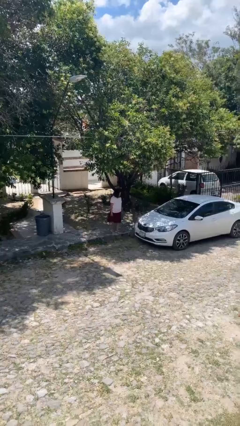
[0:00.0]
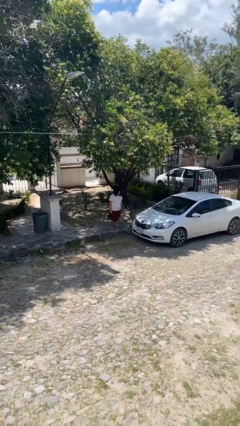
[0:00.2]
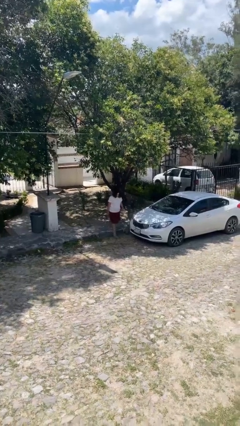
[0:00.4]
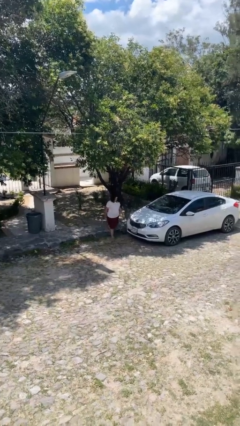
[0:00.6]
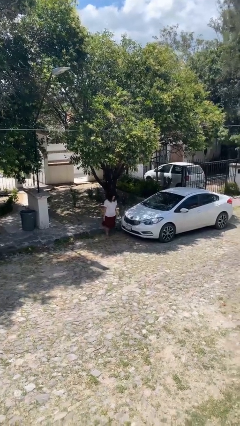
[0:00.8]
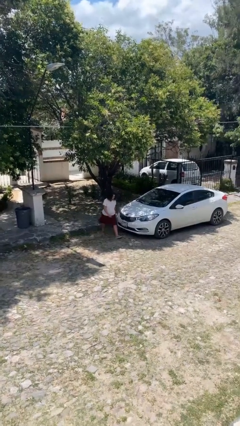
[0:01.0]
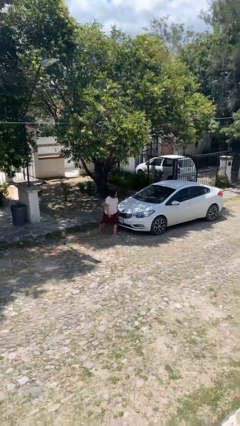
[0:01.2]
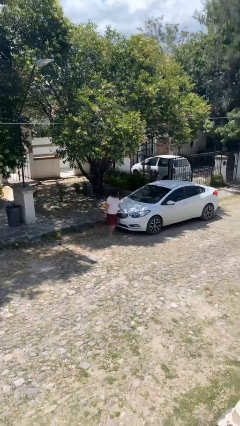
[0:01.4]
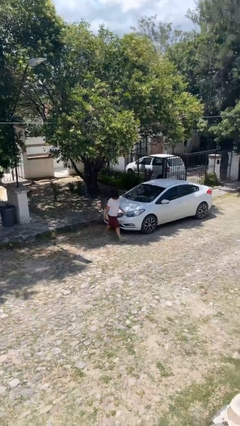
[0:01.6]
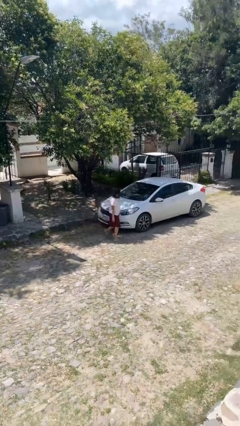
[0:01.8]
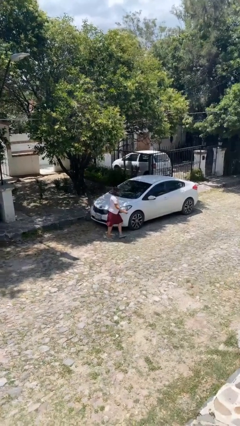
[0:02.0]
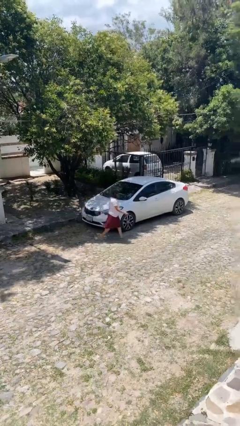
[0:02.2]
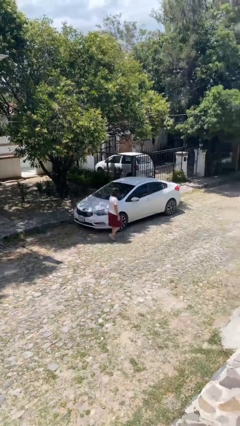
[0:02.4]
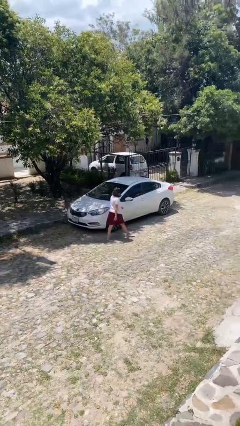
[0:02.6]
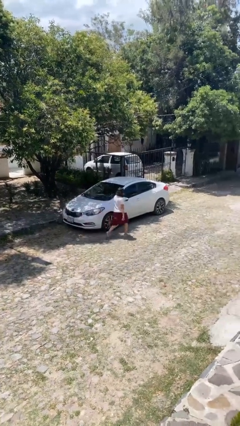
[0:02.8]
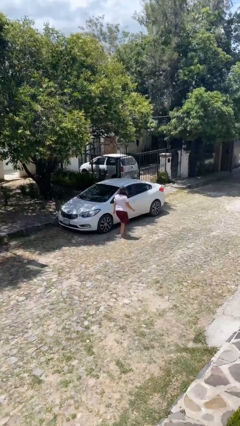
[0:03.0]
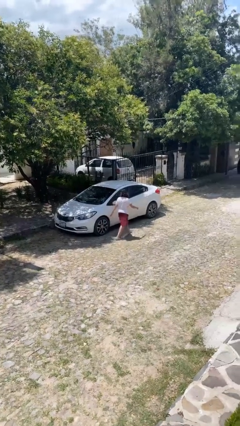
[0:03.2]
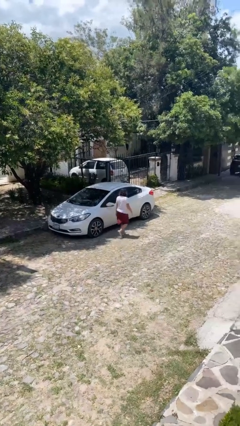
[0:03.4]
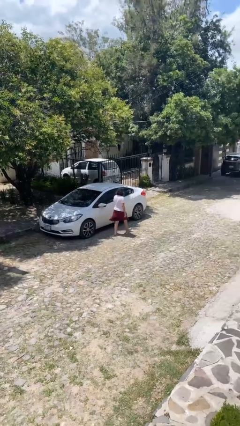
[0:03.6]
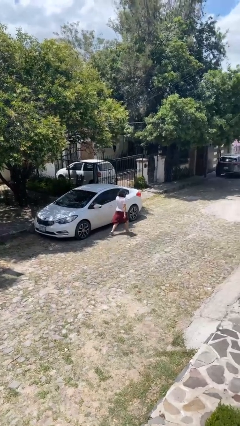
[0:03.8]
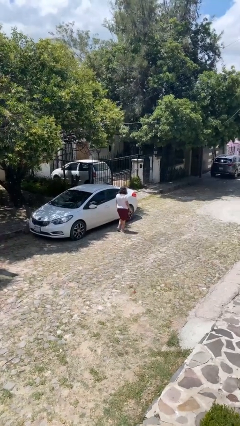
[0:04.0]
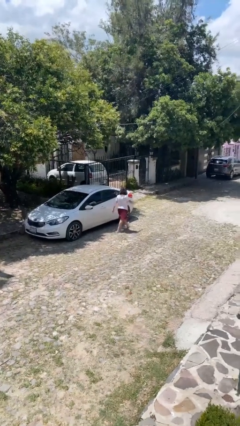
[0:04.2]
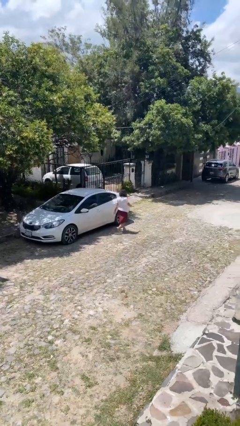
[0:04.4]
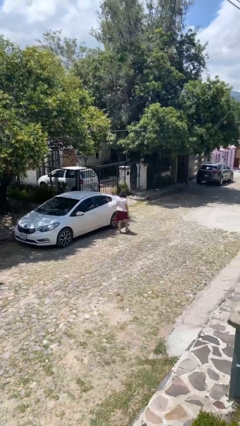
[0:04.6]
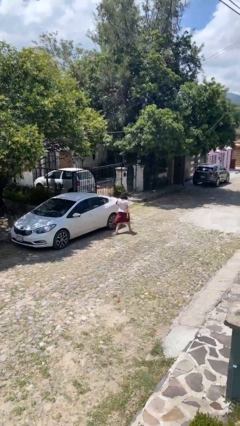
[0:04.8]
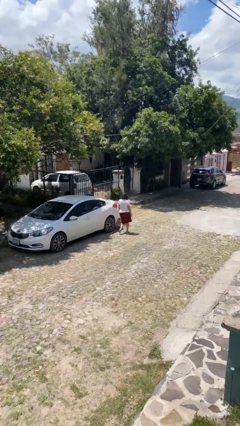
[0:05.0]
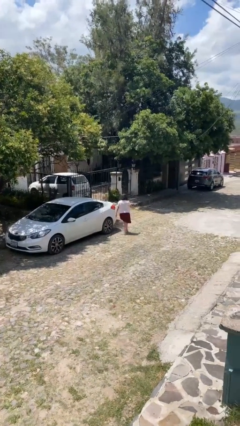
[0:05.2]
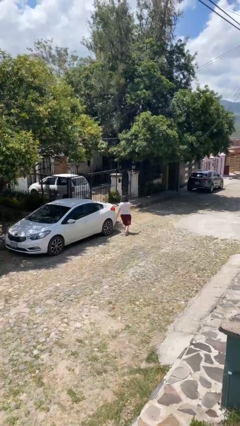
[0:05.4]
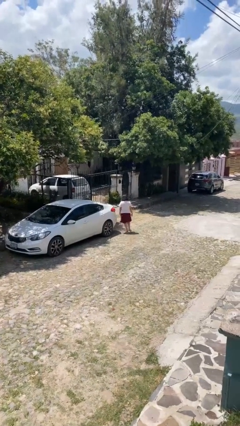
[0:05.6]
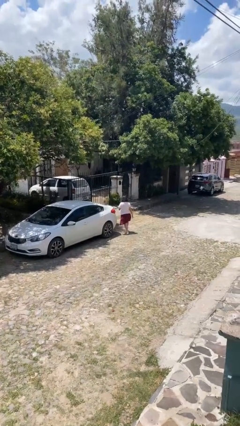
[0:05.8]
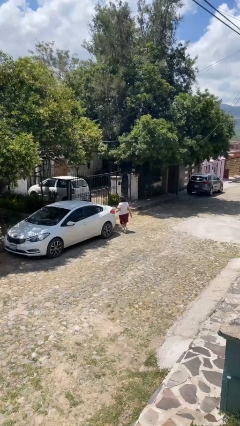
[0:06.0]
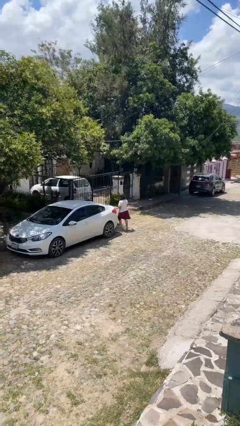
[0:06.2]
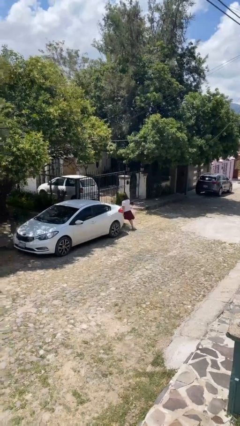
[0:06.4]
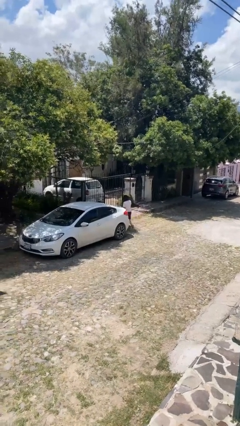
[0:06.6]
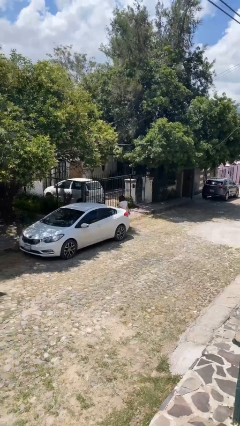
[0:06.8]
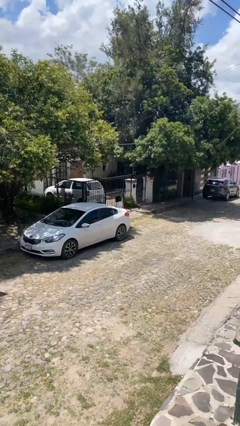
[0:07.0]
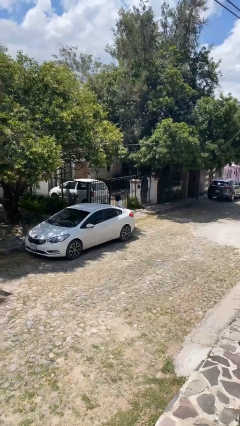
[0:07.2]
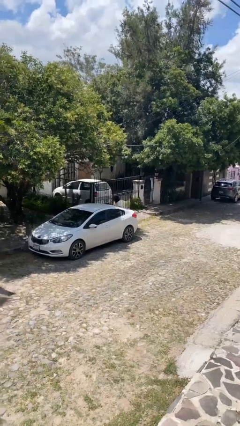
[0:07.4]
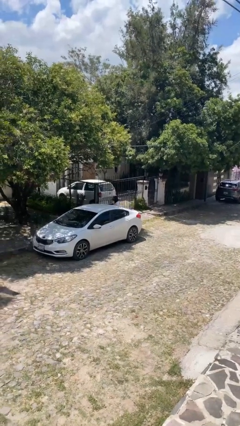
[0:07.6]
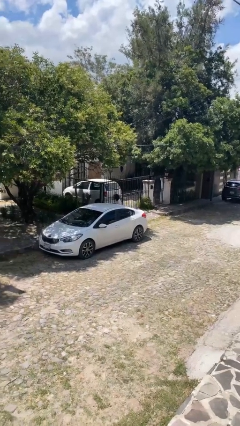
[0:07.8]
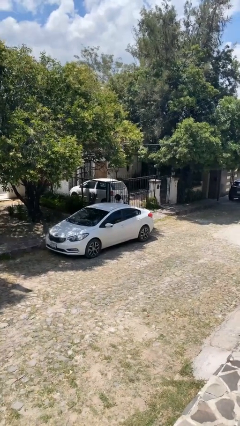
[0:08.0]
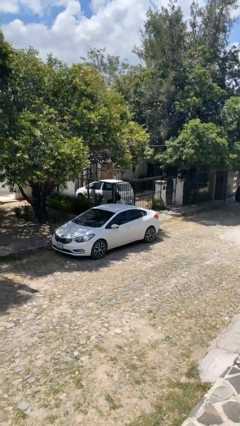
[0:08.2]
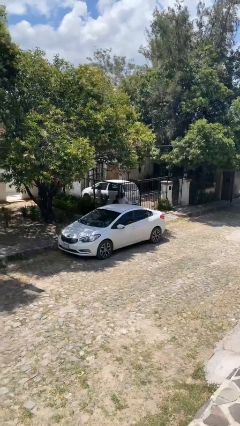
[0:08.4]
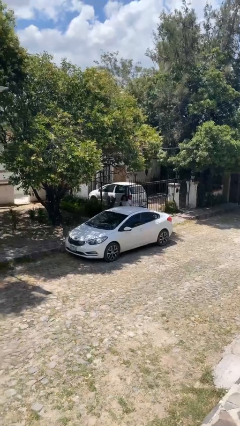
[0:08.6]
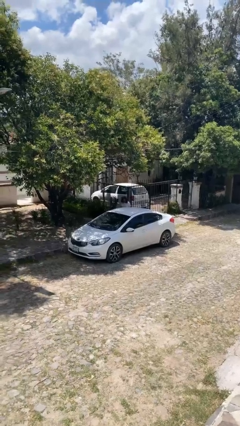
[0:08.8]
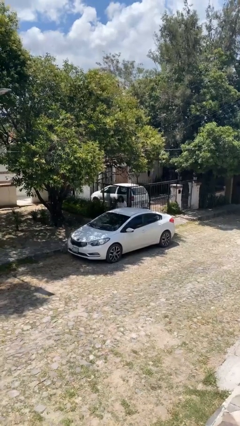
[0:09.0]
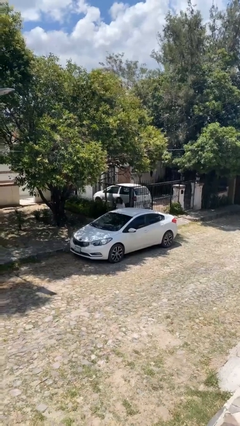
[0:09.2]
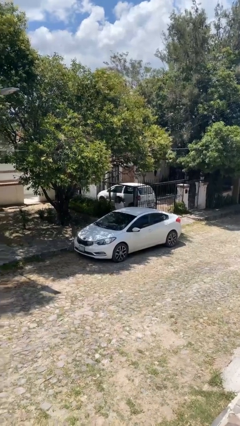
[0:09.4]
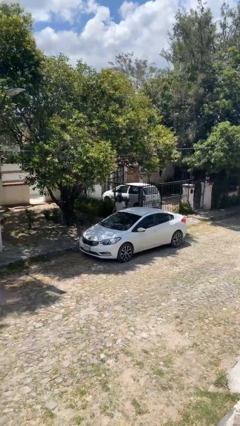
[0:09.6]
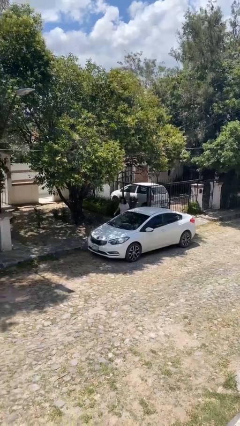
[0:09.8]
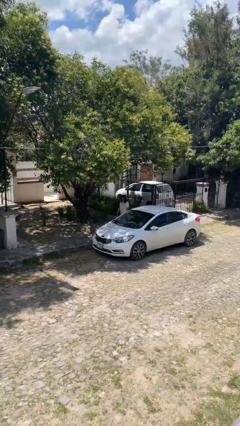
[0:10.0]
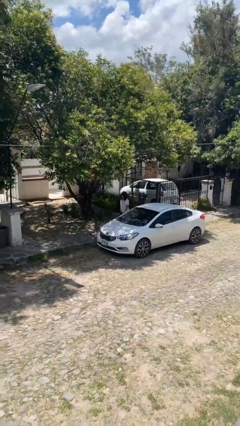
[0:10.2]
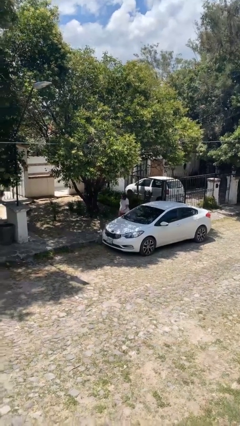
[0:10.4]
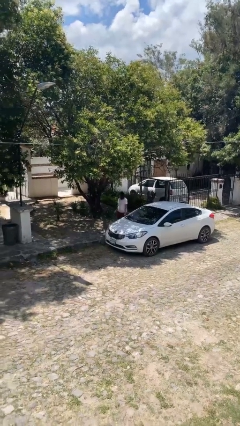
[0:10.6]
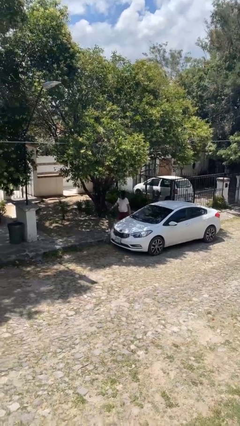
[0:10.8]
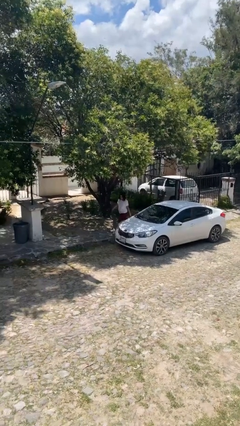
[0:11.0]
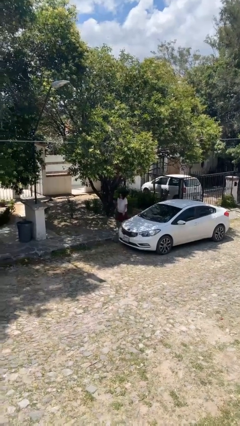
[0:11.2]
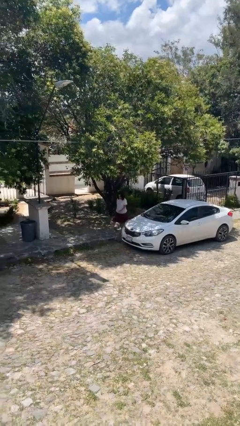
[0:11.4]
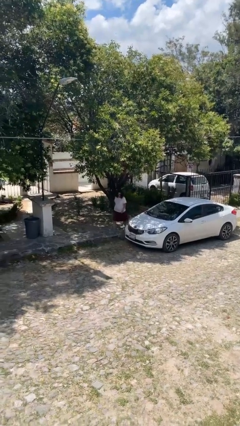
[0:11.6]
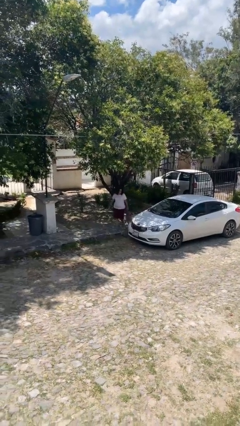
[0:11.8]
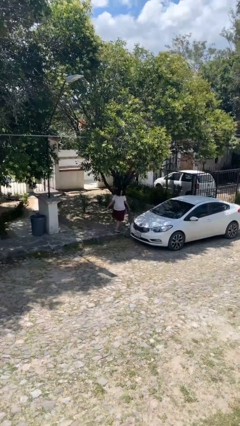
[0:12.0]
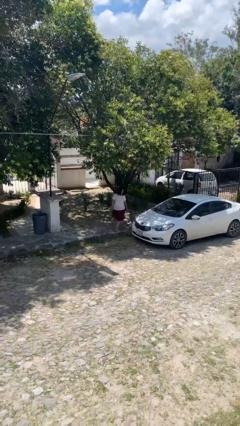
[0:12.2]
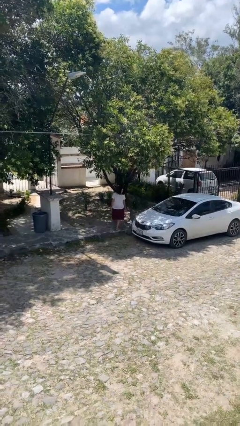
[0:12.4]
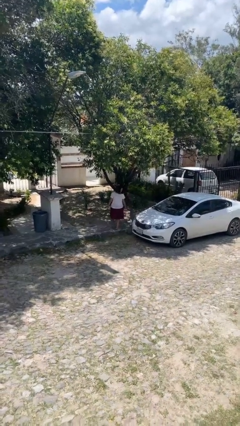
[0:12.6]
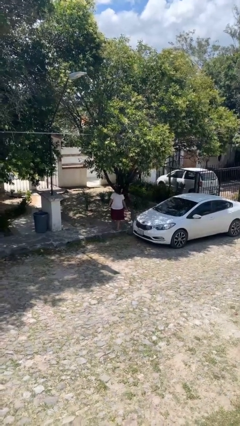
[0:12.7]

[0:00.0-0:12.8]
person walks around car

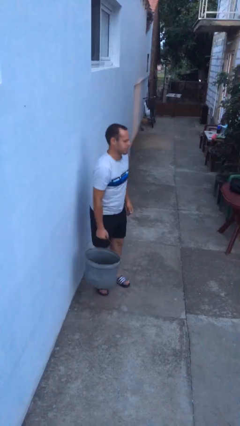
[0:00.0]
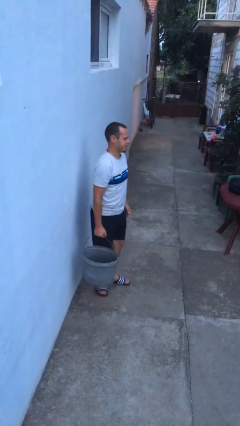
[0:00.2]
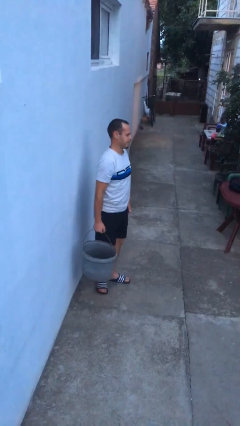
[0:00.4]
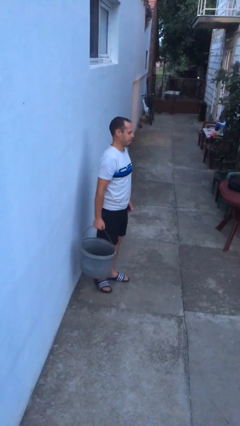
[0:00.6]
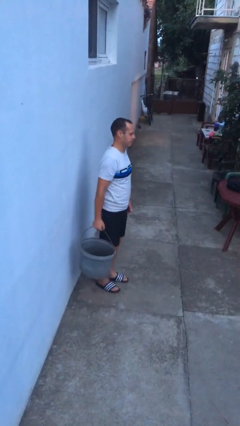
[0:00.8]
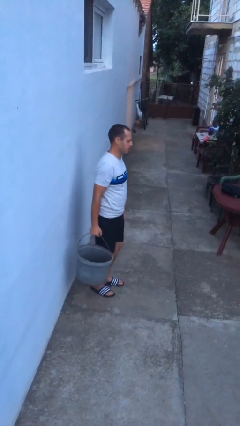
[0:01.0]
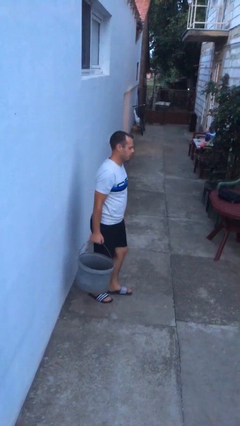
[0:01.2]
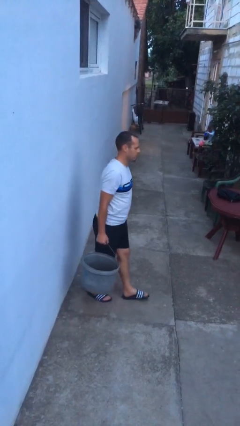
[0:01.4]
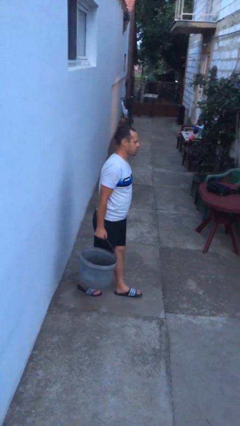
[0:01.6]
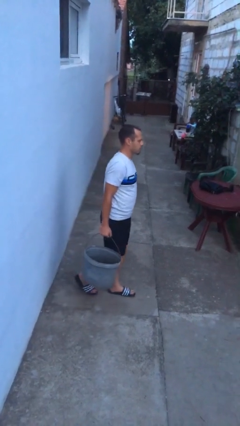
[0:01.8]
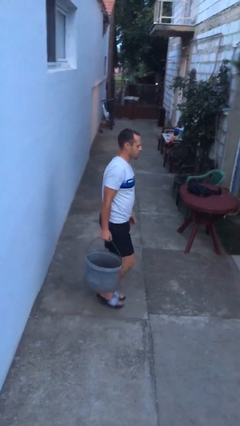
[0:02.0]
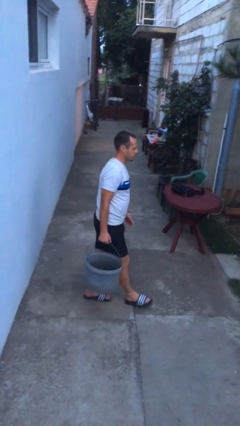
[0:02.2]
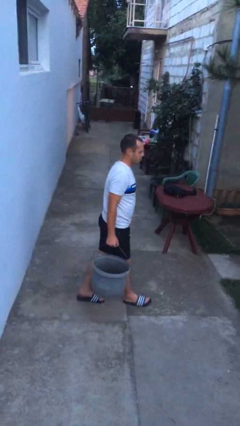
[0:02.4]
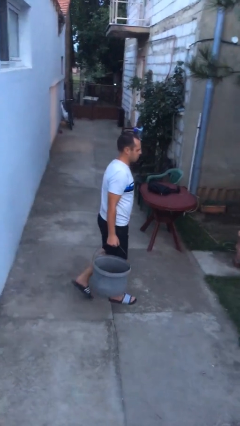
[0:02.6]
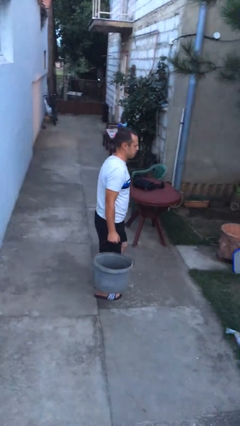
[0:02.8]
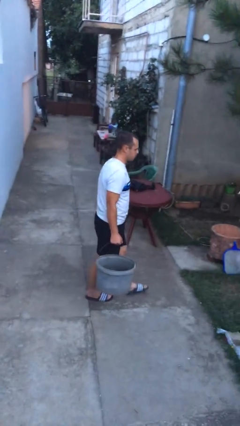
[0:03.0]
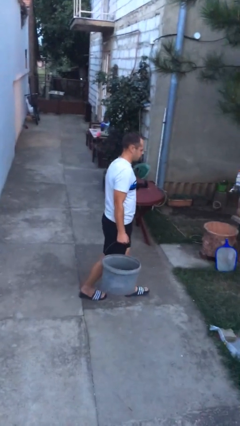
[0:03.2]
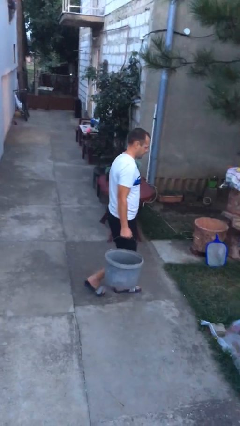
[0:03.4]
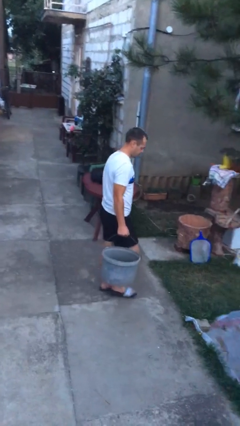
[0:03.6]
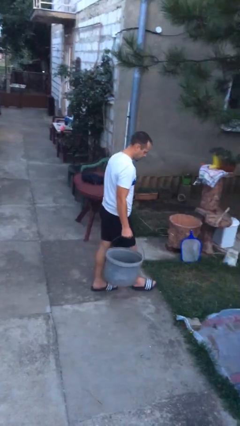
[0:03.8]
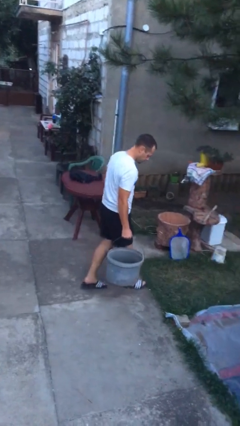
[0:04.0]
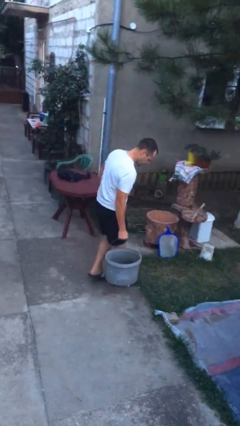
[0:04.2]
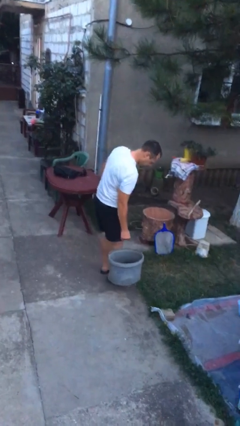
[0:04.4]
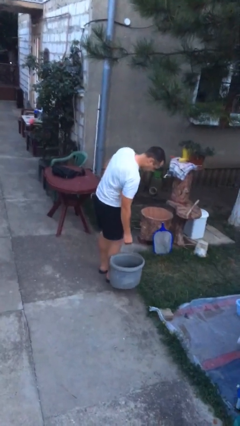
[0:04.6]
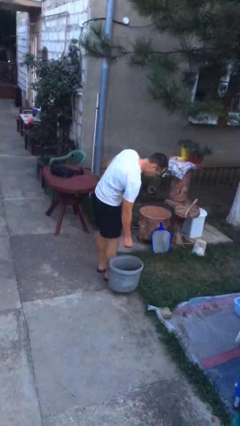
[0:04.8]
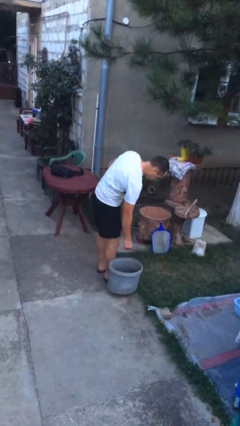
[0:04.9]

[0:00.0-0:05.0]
person carries heavy object
